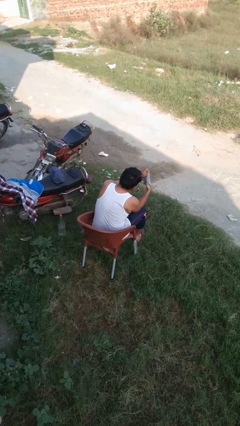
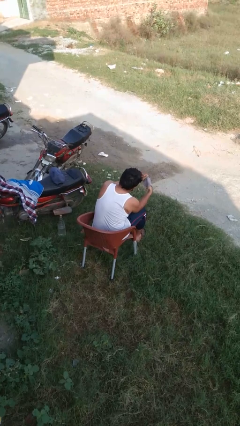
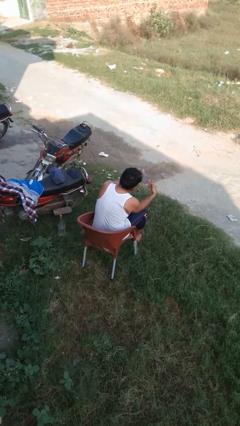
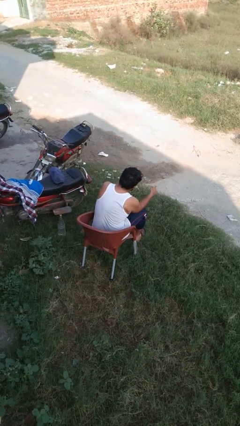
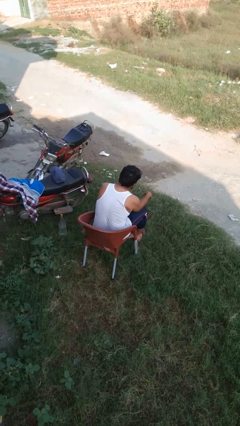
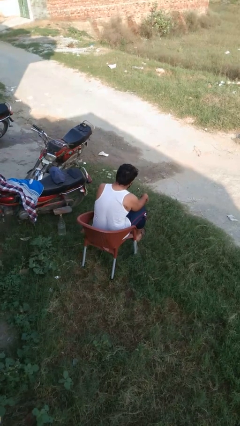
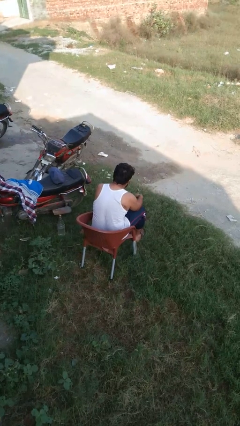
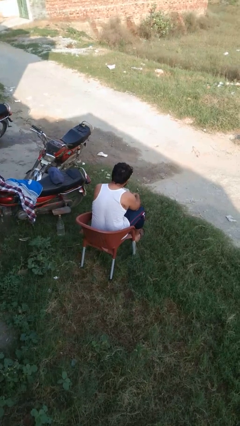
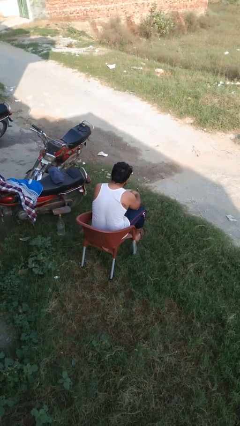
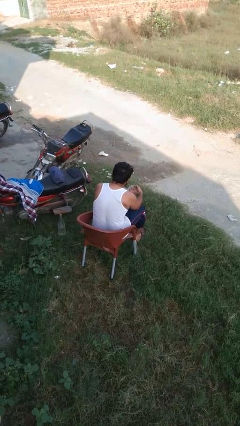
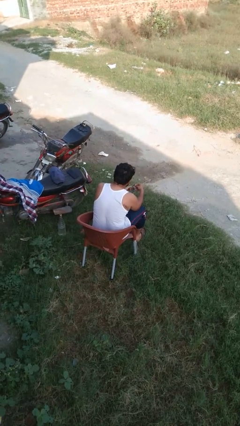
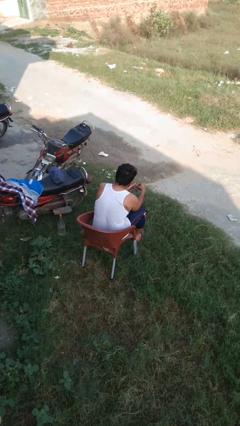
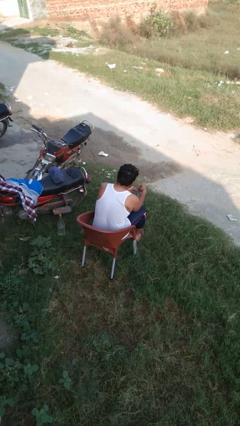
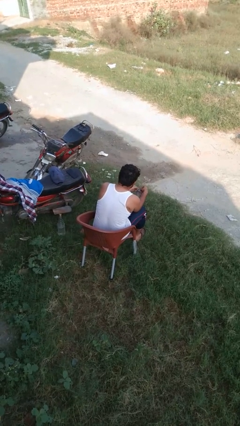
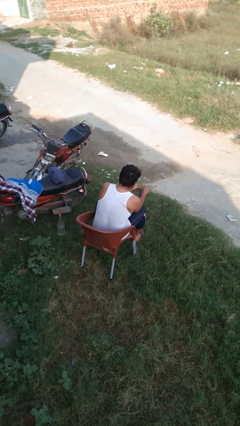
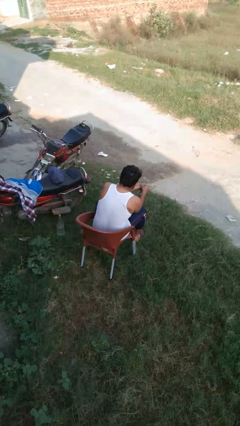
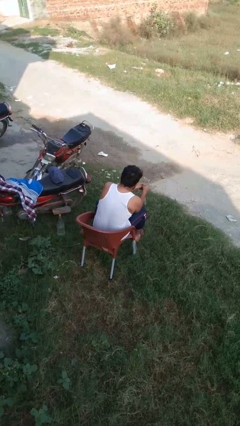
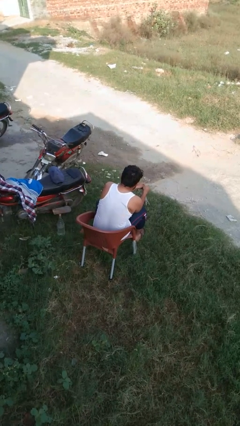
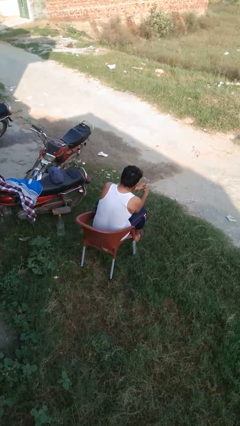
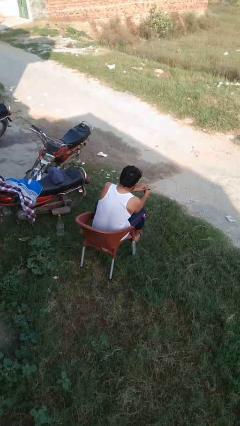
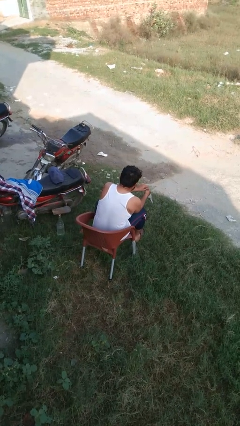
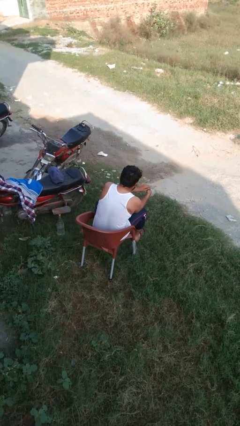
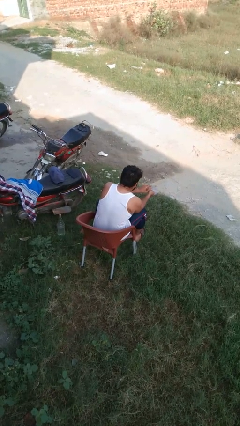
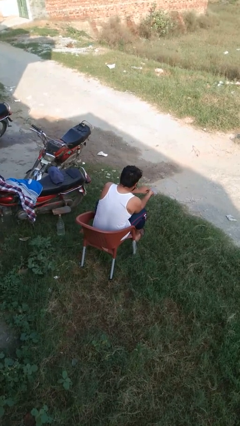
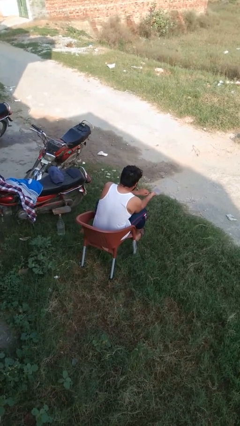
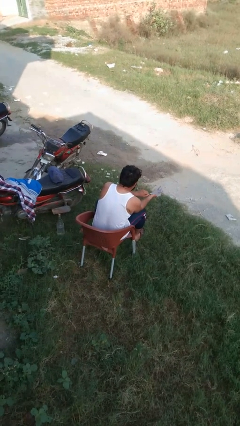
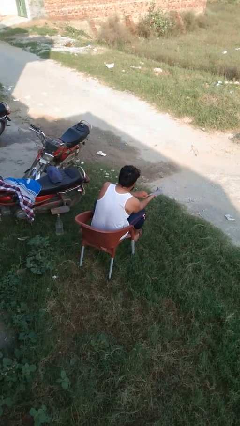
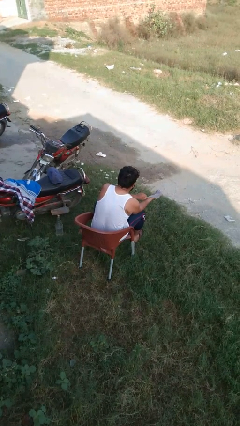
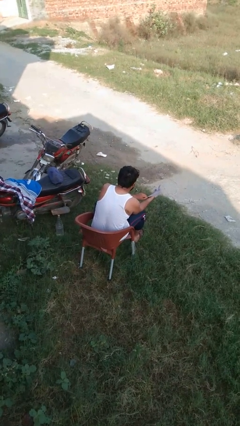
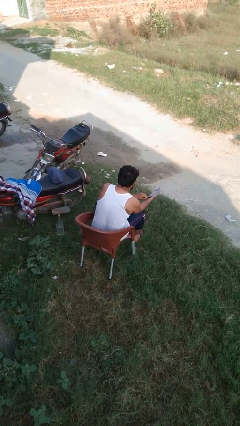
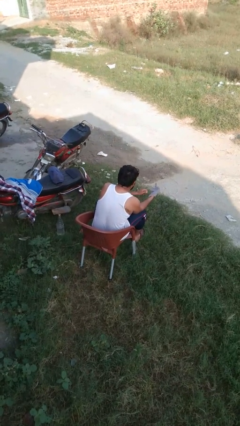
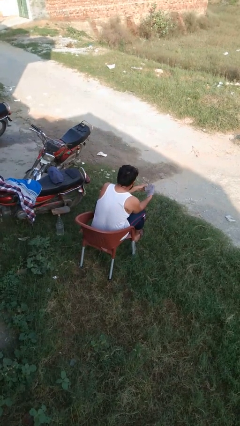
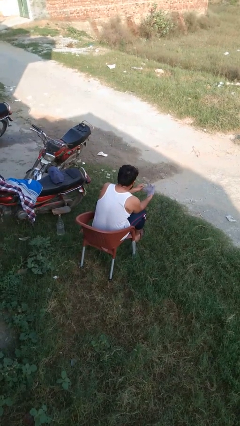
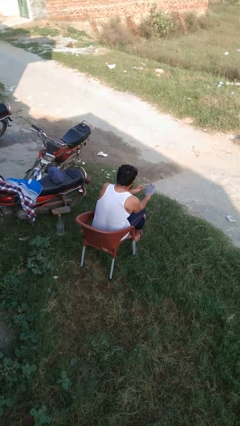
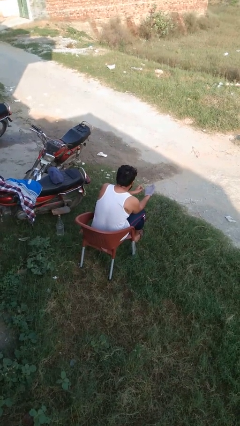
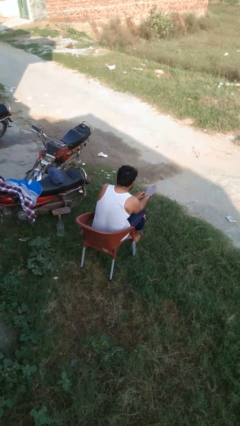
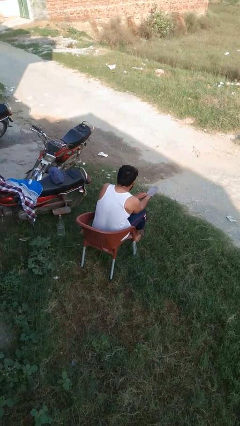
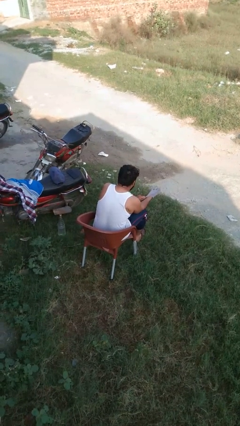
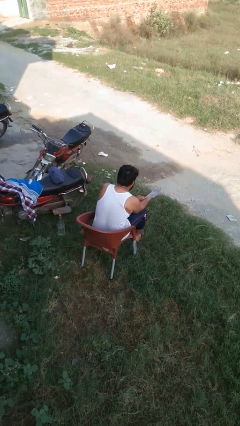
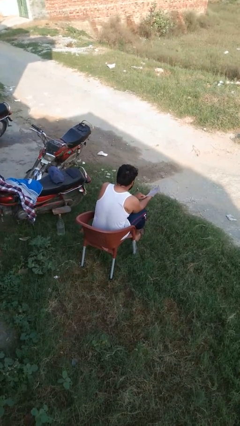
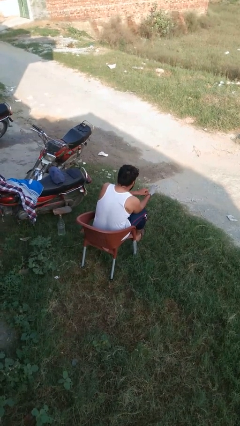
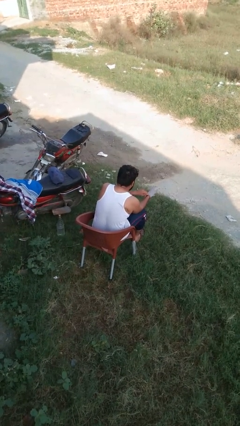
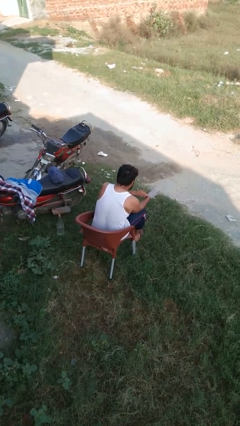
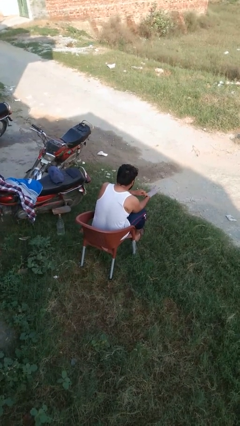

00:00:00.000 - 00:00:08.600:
person puts on gloves

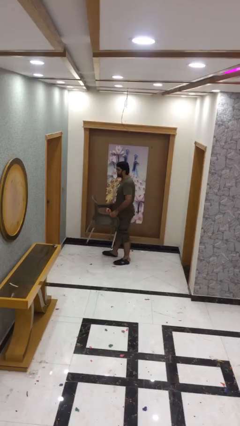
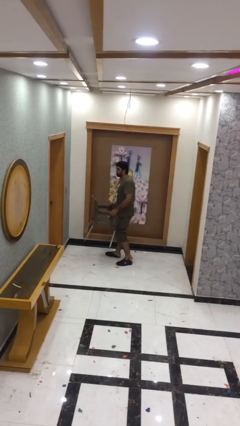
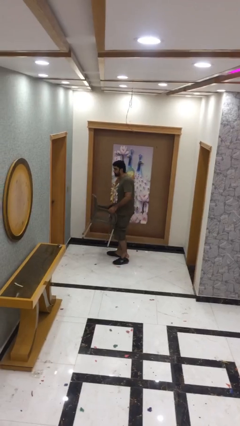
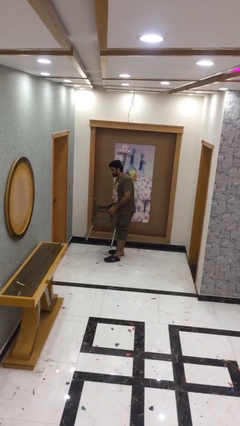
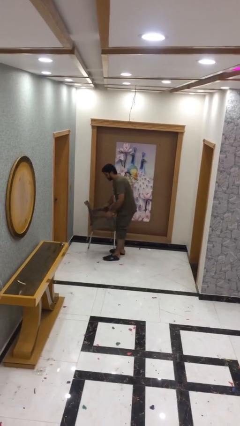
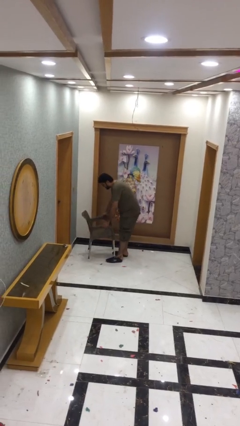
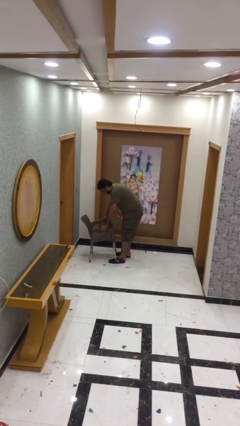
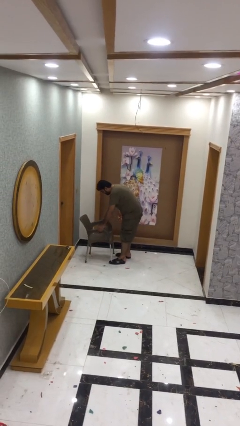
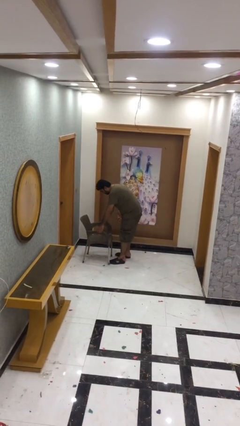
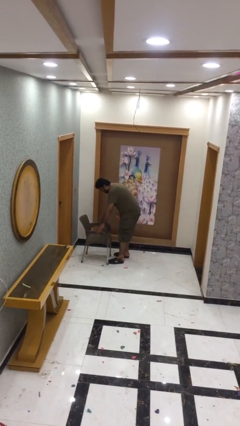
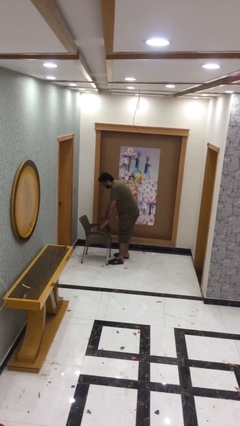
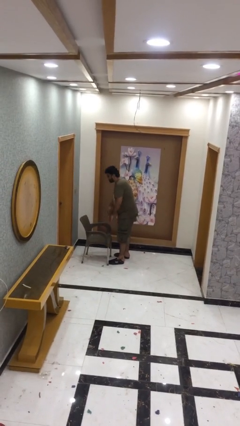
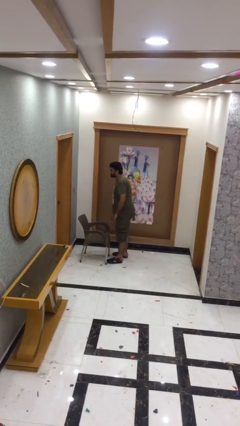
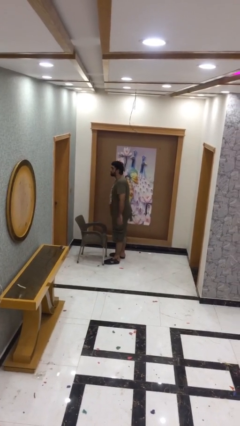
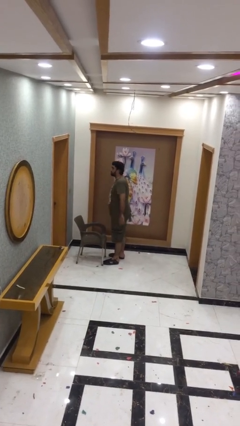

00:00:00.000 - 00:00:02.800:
person puts down object on floor

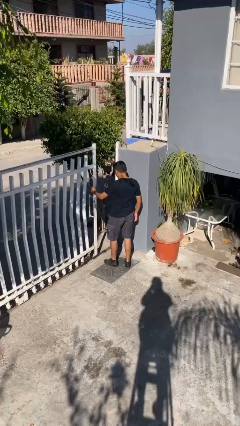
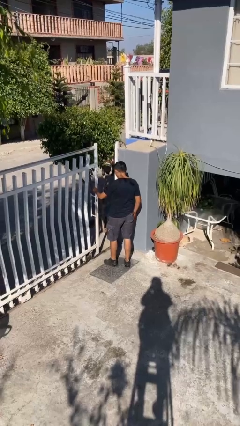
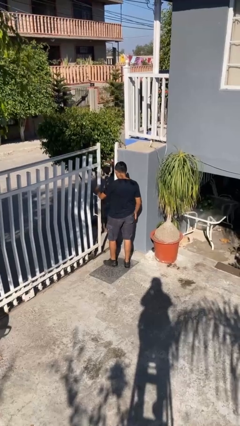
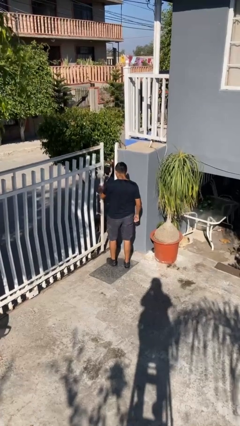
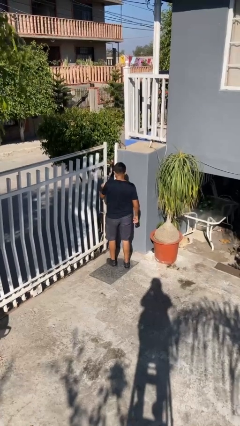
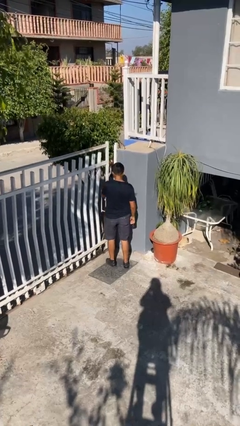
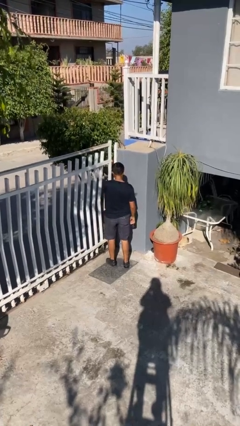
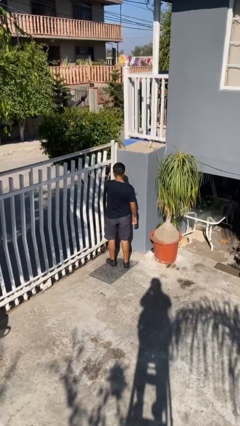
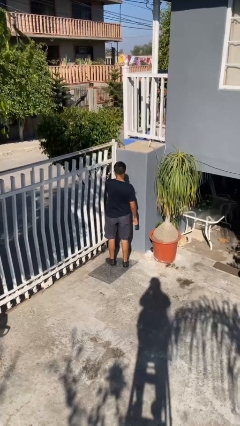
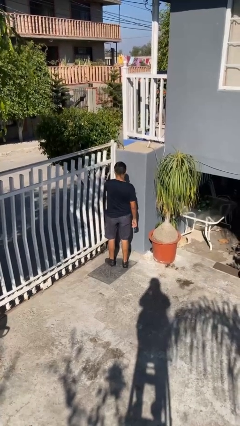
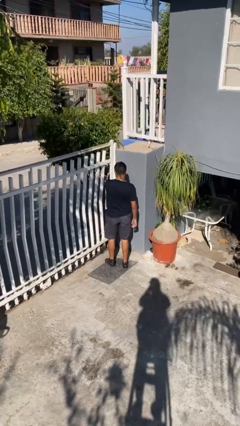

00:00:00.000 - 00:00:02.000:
person closes facility door

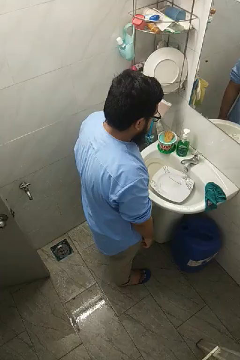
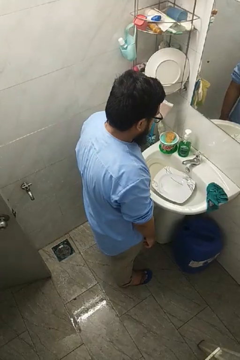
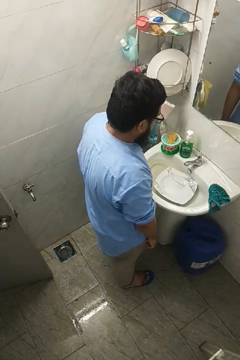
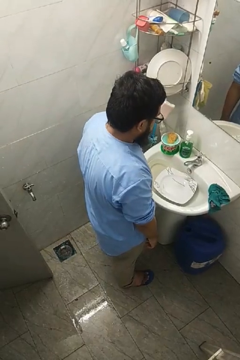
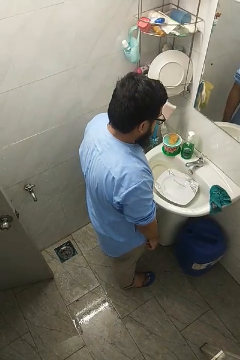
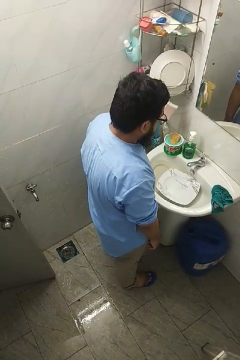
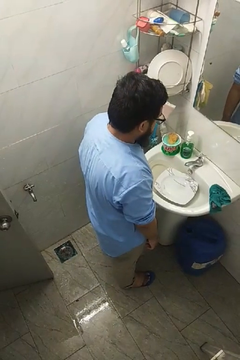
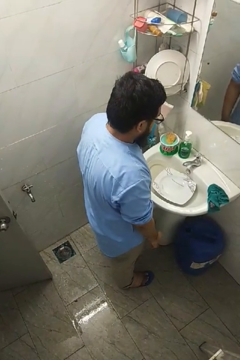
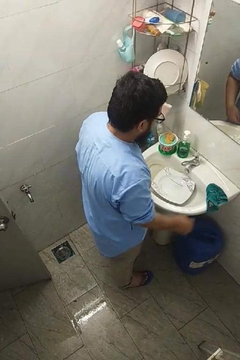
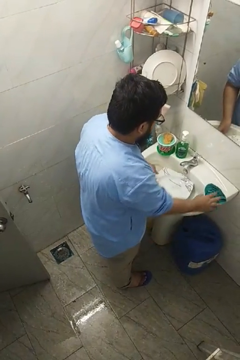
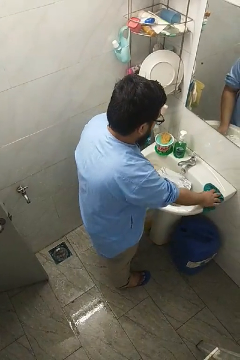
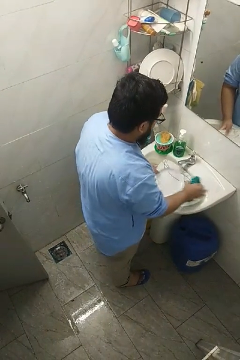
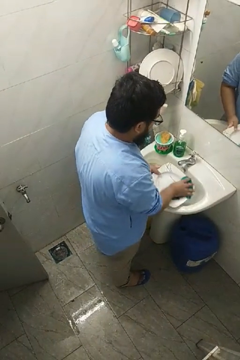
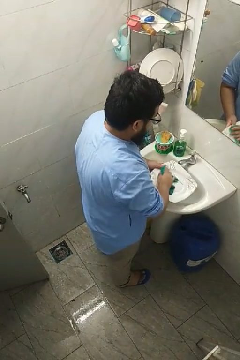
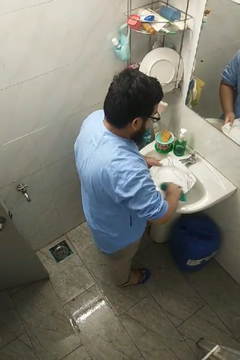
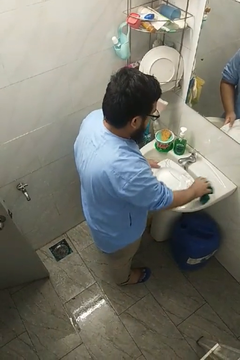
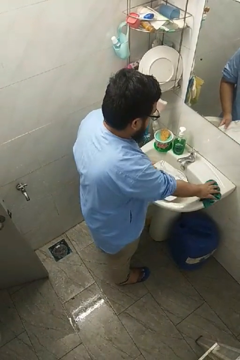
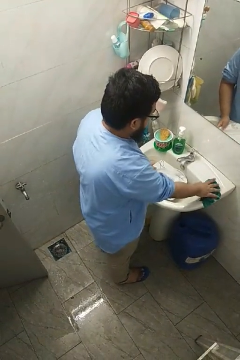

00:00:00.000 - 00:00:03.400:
person dries dish

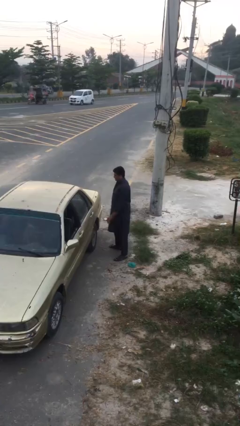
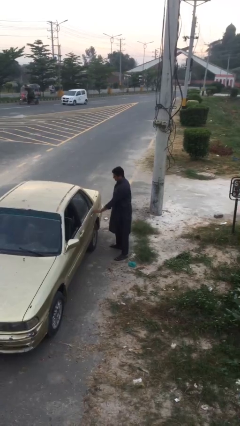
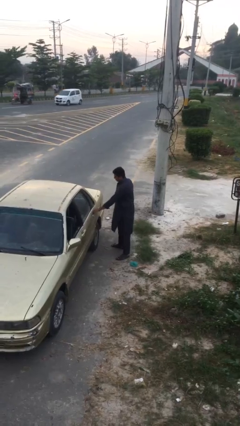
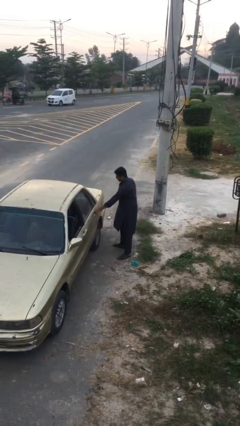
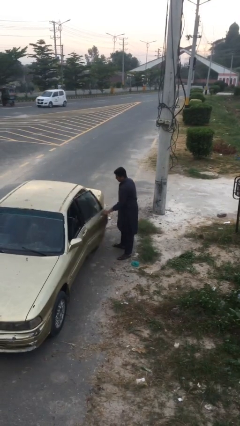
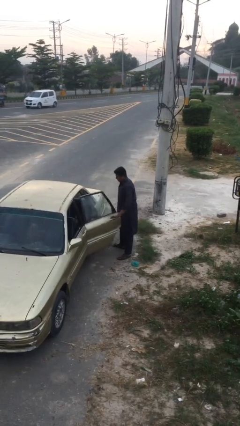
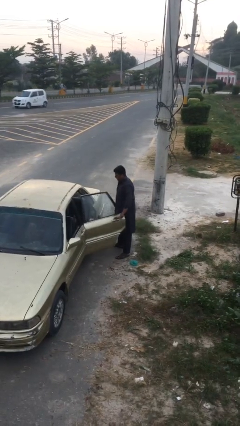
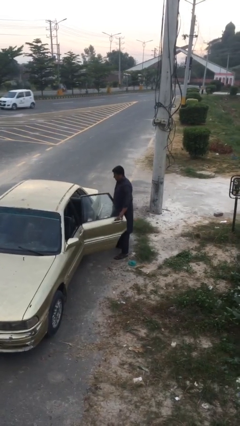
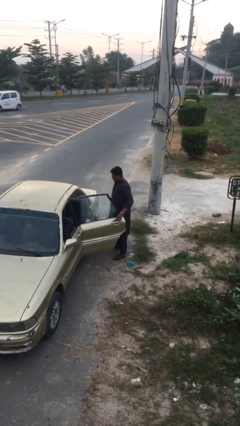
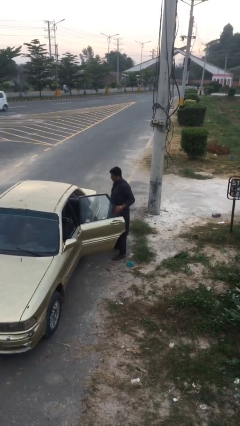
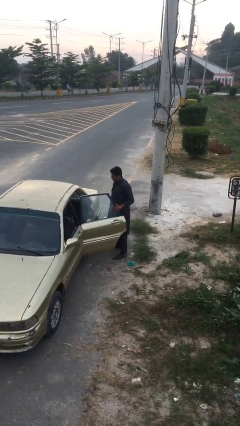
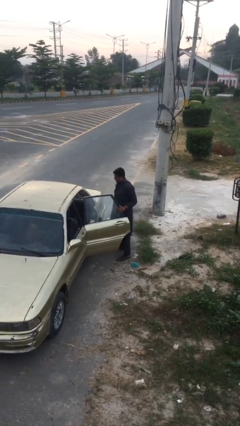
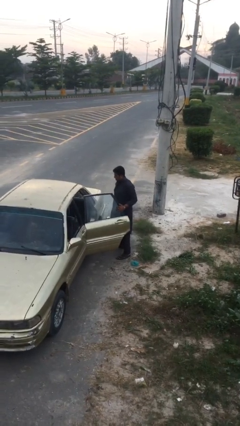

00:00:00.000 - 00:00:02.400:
person opens car door
